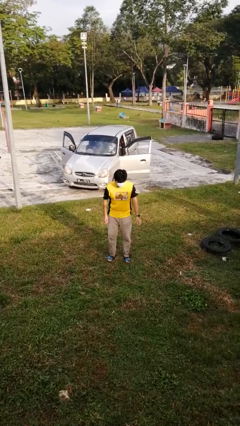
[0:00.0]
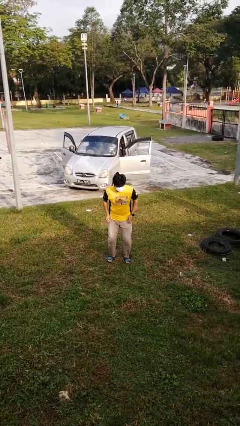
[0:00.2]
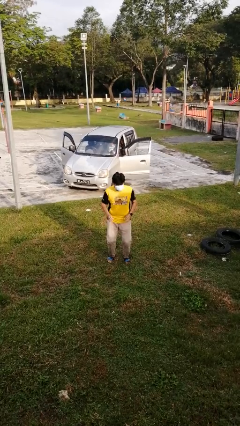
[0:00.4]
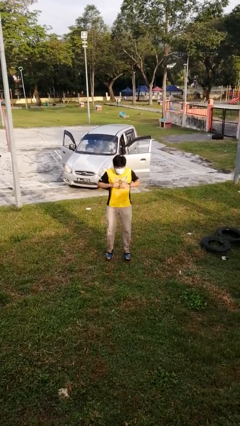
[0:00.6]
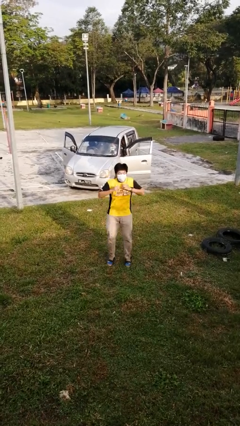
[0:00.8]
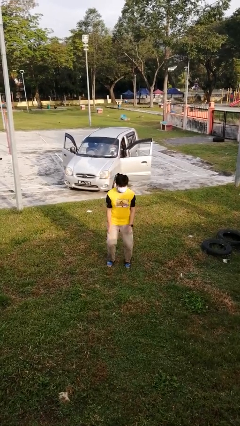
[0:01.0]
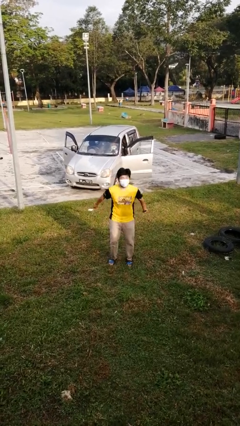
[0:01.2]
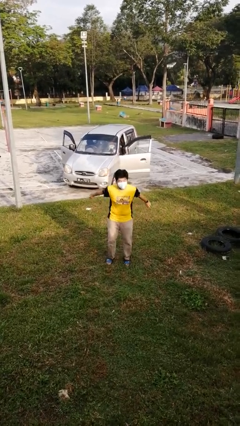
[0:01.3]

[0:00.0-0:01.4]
person jumps

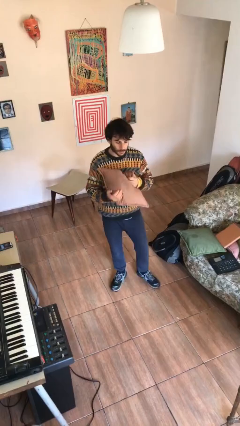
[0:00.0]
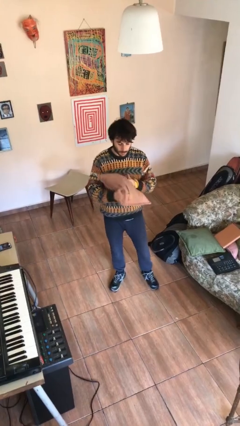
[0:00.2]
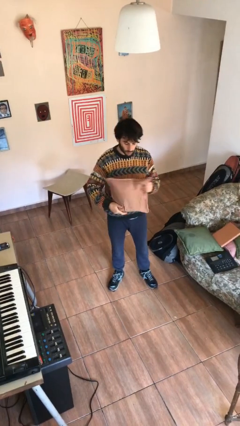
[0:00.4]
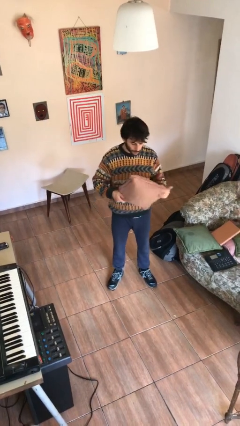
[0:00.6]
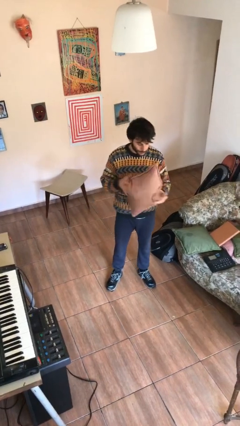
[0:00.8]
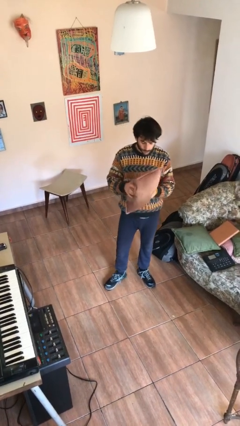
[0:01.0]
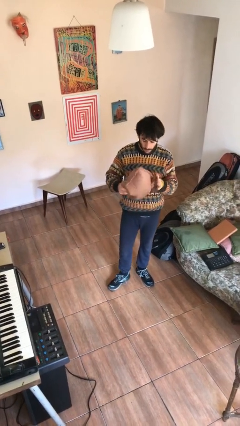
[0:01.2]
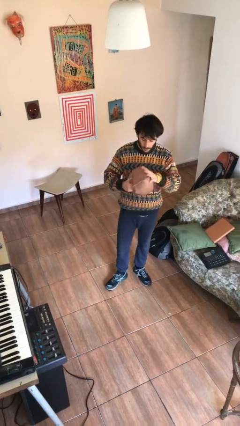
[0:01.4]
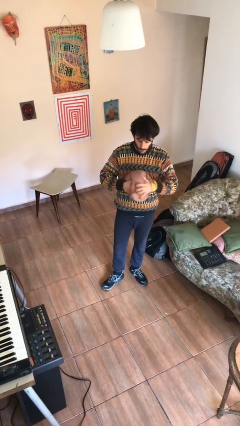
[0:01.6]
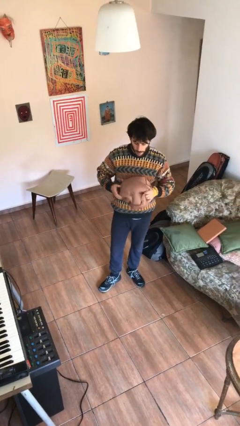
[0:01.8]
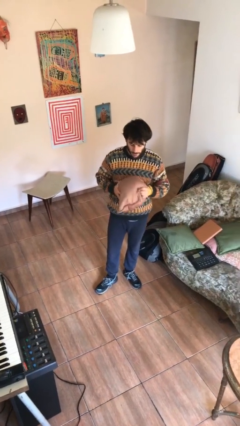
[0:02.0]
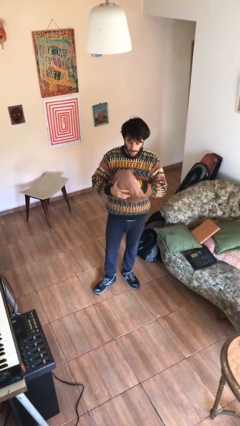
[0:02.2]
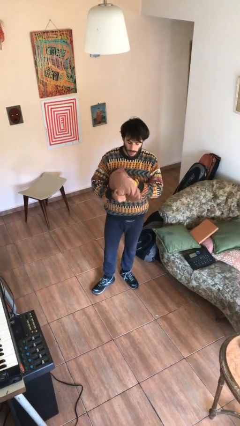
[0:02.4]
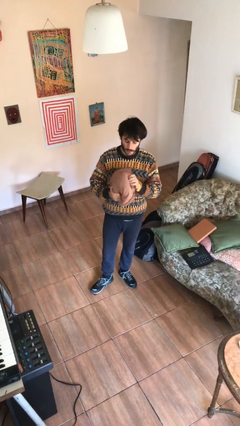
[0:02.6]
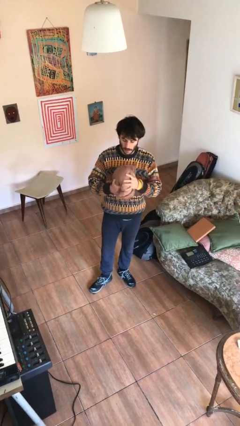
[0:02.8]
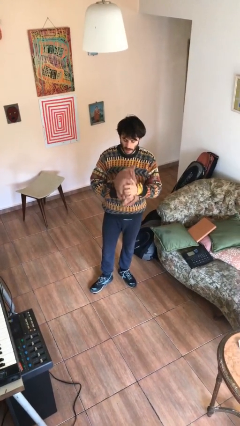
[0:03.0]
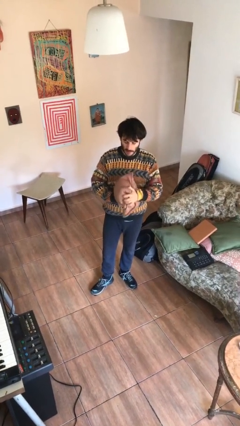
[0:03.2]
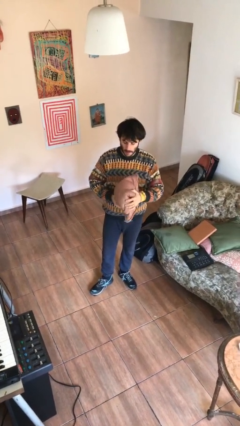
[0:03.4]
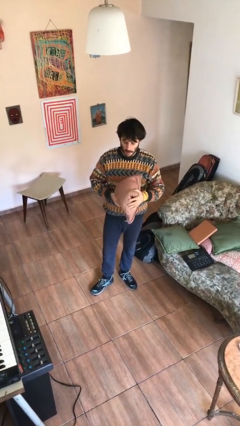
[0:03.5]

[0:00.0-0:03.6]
person squeezes object

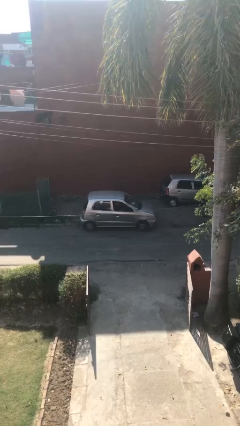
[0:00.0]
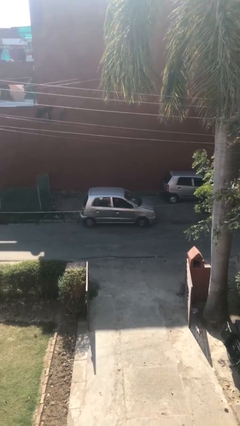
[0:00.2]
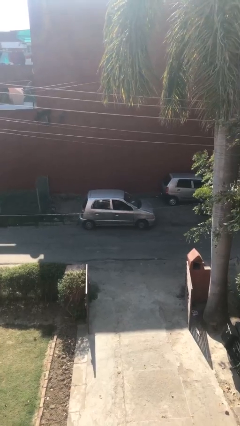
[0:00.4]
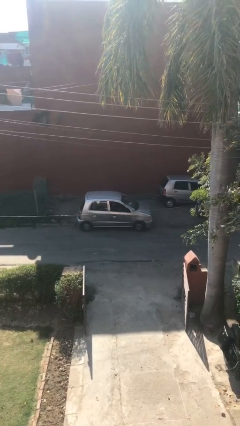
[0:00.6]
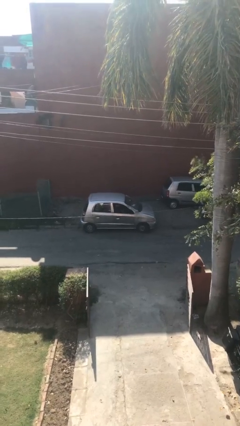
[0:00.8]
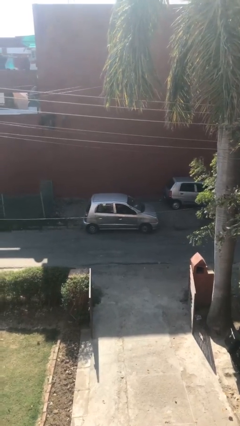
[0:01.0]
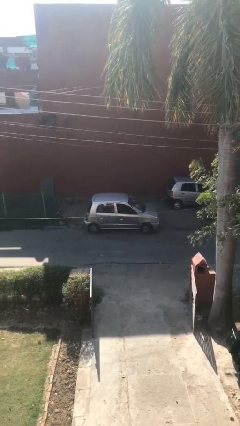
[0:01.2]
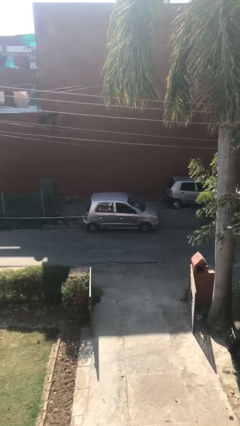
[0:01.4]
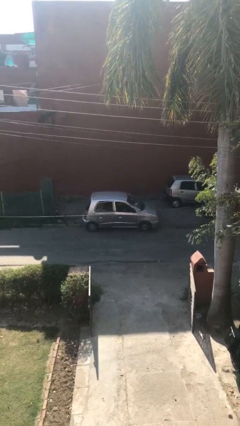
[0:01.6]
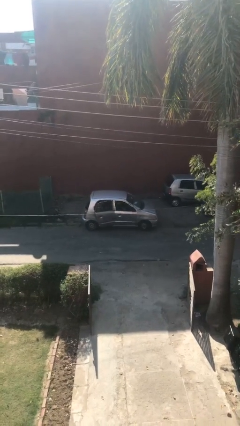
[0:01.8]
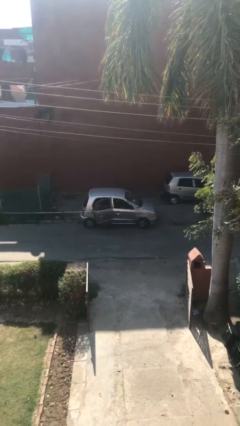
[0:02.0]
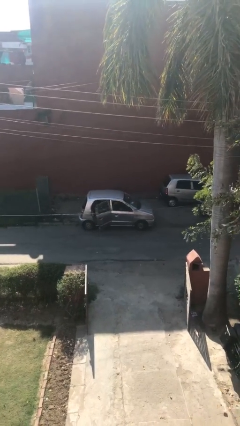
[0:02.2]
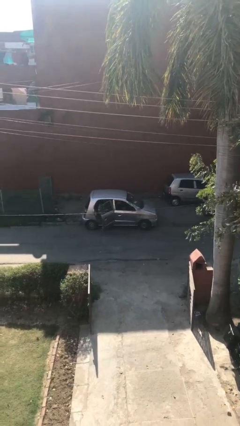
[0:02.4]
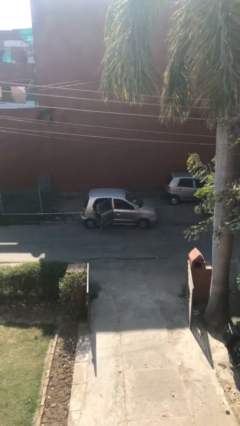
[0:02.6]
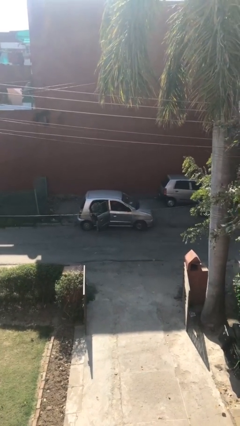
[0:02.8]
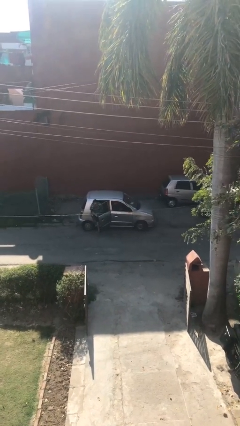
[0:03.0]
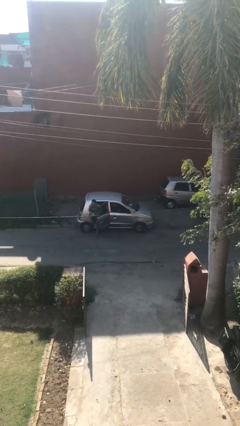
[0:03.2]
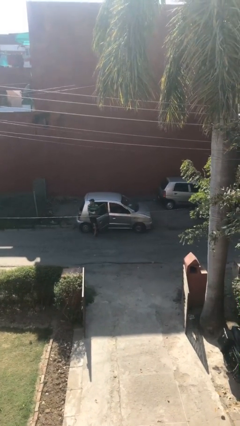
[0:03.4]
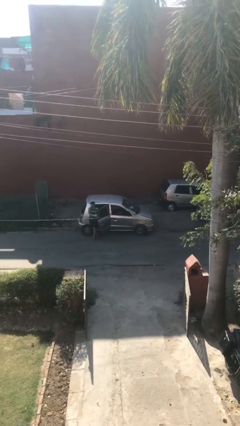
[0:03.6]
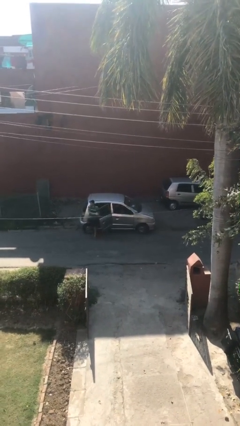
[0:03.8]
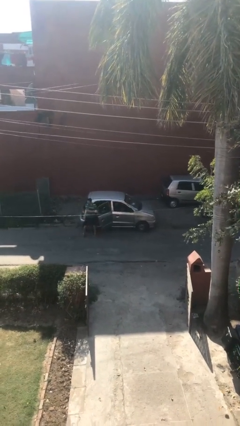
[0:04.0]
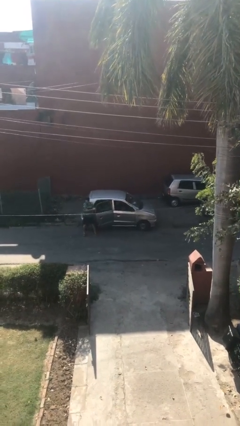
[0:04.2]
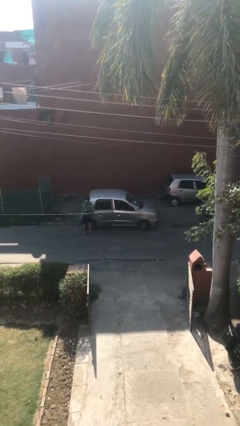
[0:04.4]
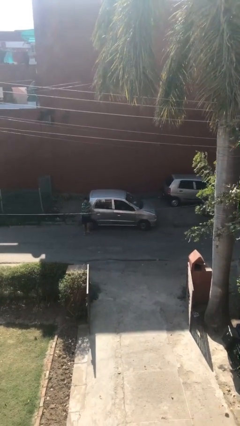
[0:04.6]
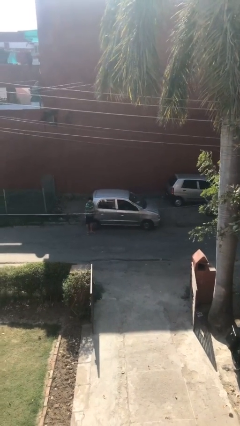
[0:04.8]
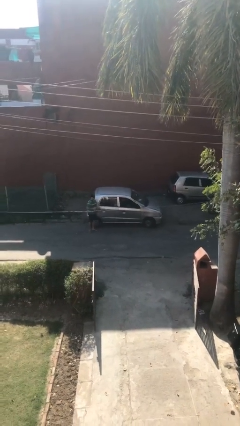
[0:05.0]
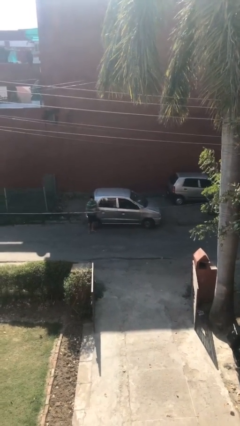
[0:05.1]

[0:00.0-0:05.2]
car drops off person

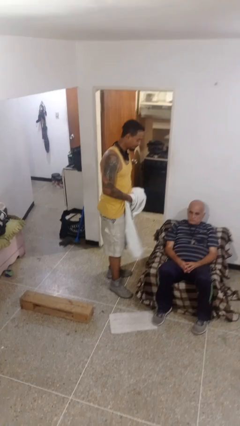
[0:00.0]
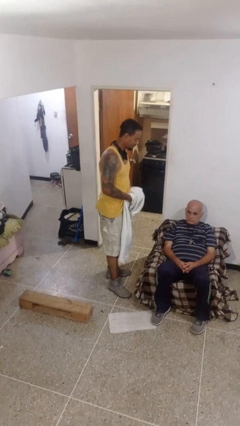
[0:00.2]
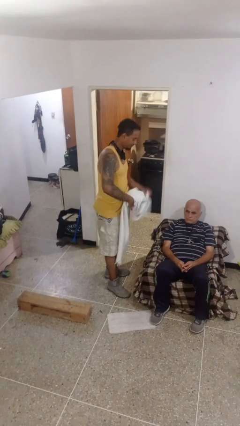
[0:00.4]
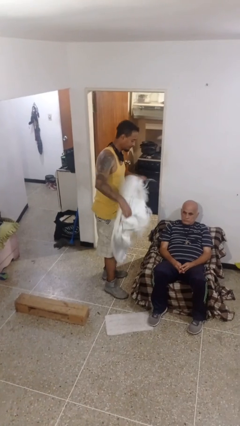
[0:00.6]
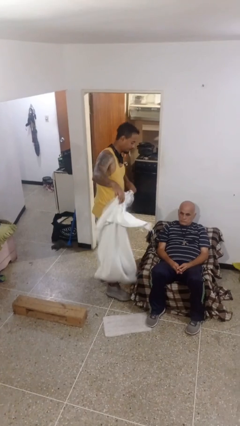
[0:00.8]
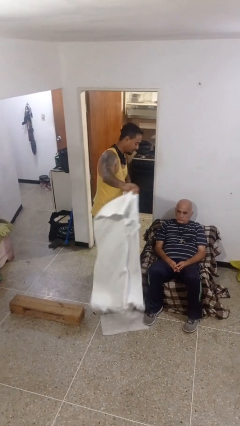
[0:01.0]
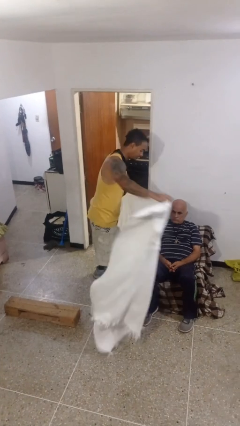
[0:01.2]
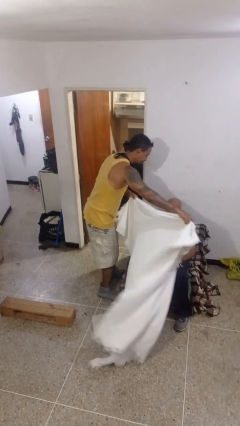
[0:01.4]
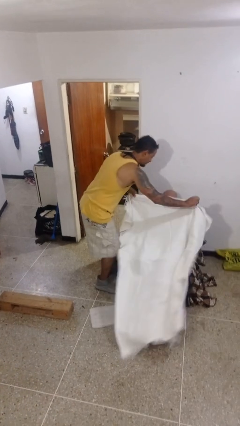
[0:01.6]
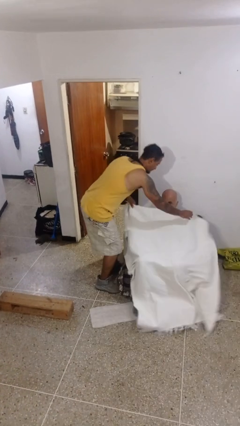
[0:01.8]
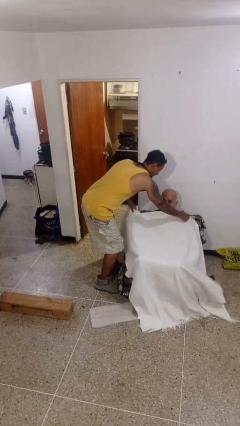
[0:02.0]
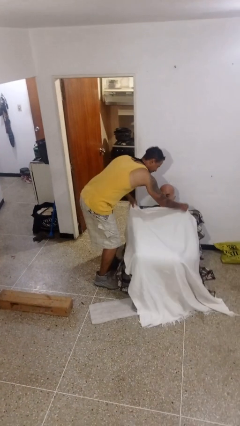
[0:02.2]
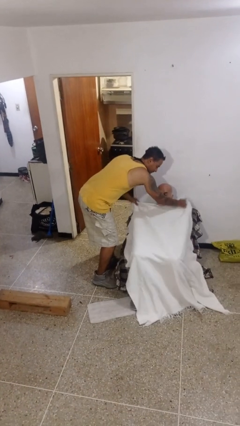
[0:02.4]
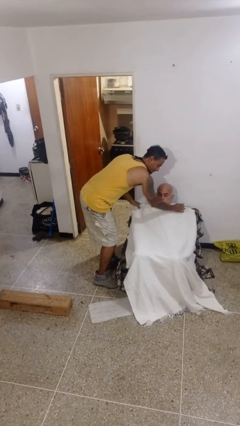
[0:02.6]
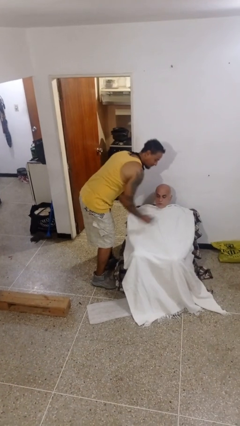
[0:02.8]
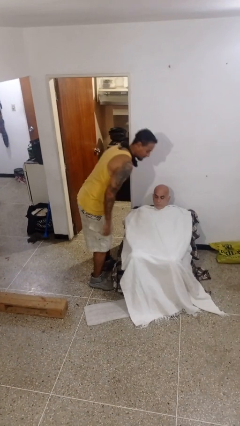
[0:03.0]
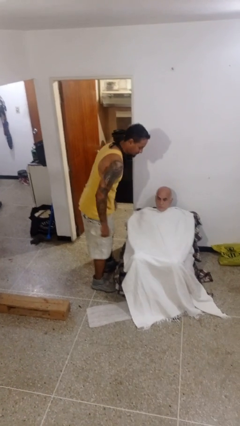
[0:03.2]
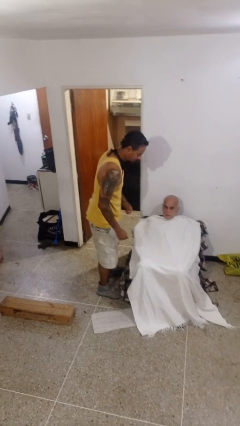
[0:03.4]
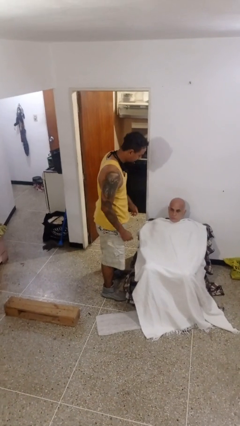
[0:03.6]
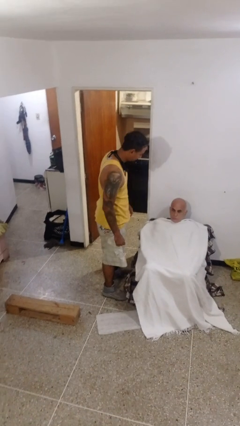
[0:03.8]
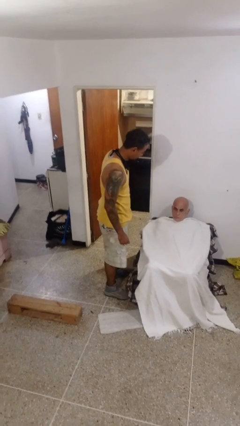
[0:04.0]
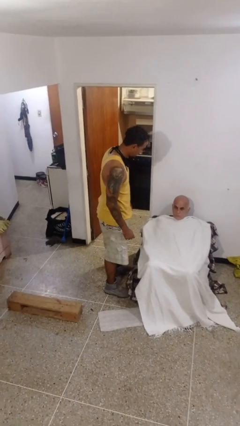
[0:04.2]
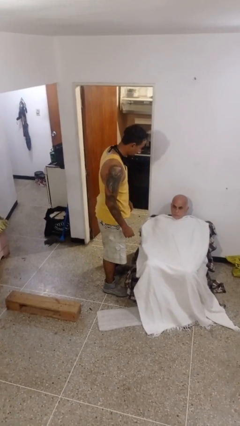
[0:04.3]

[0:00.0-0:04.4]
person covers friend with blanket

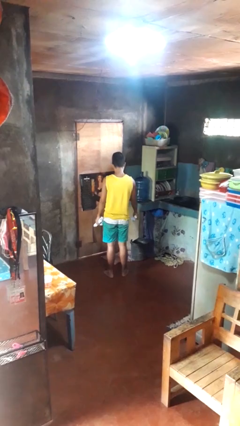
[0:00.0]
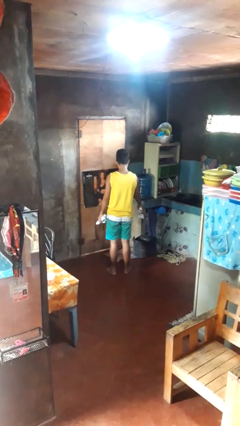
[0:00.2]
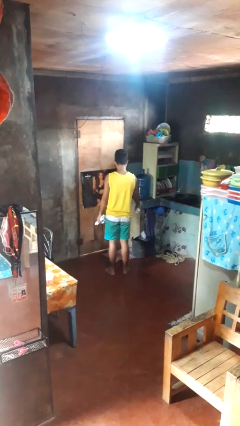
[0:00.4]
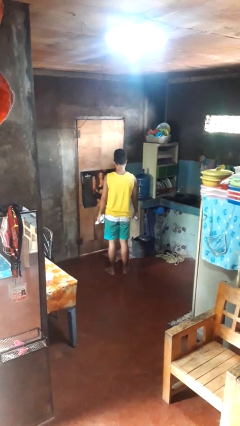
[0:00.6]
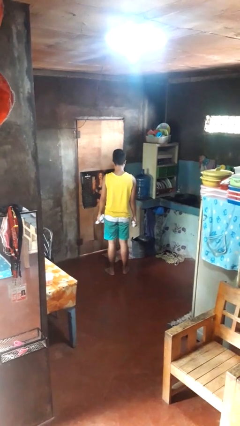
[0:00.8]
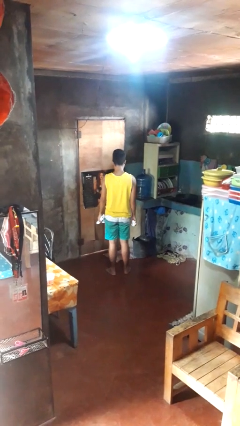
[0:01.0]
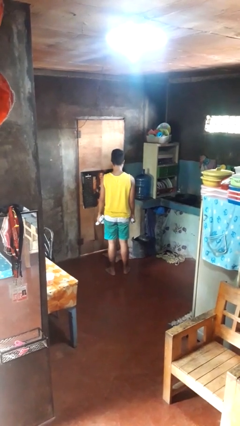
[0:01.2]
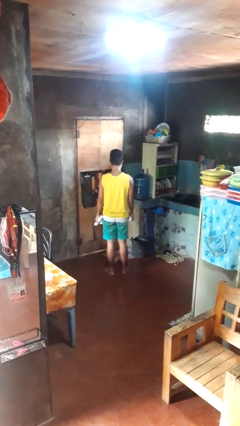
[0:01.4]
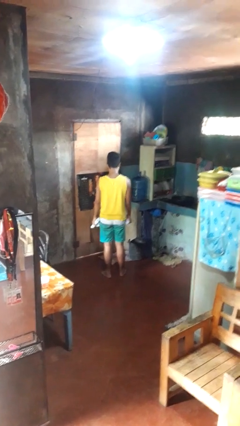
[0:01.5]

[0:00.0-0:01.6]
person discards trash

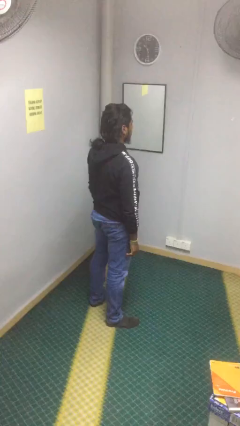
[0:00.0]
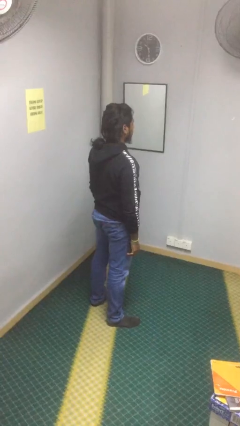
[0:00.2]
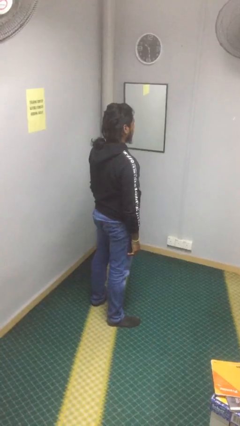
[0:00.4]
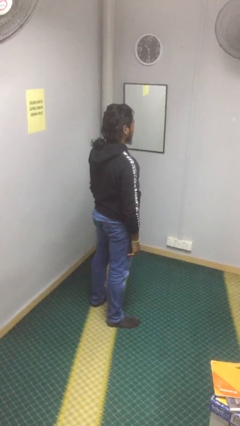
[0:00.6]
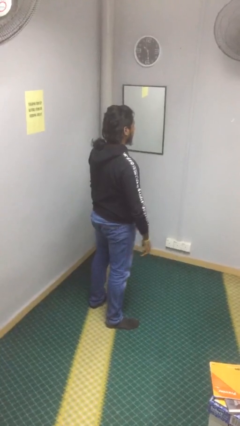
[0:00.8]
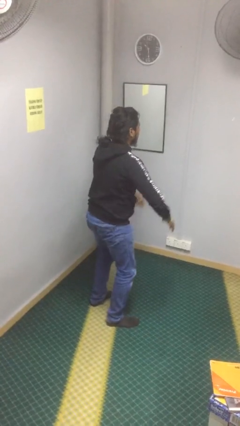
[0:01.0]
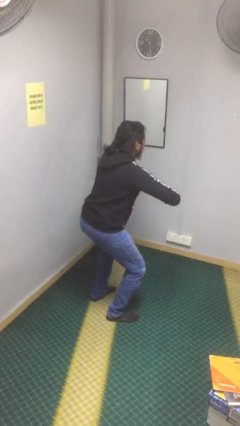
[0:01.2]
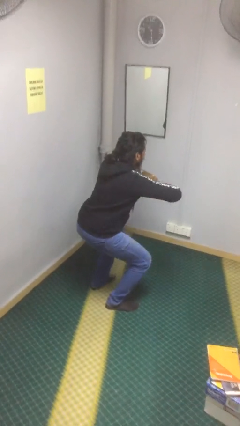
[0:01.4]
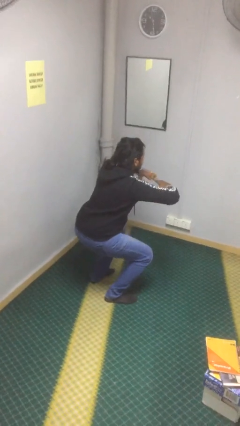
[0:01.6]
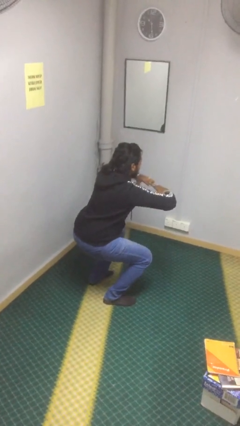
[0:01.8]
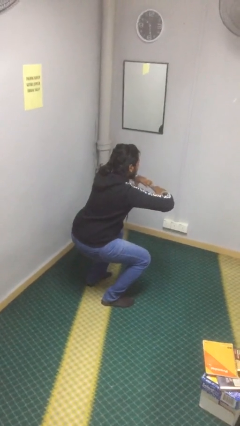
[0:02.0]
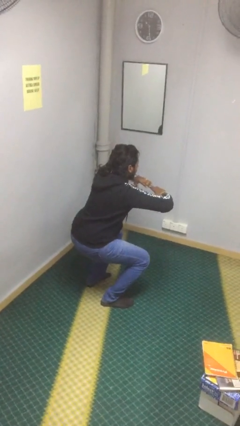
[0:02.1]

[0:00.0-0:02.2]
person squats
